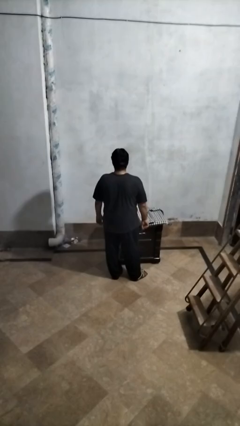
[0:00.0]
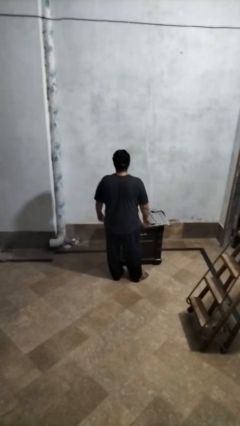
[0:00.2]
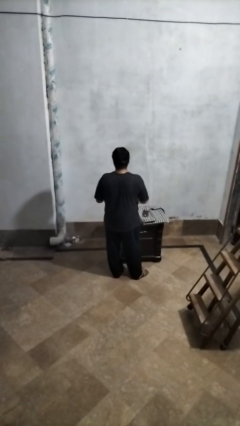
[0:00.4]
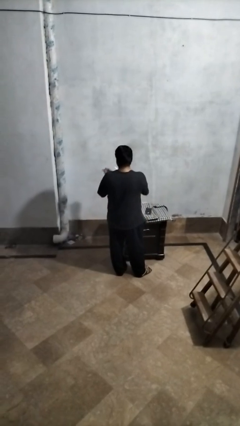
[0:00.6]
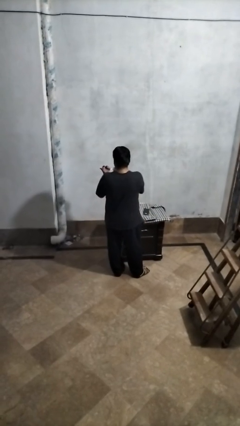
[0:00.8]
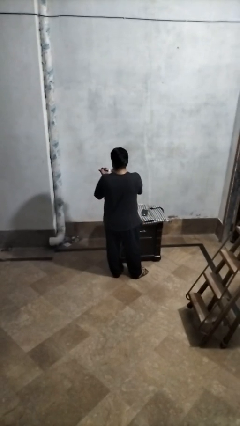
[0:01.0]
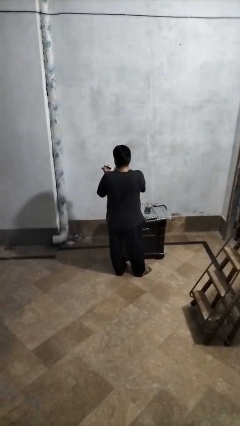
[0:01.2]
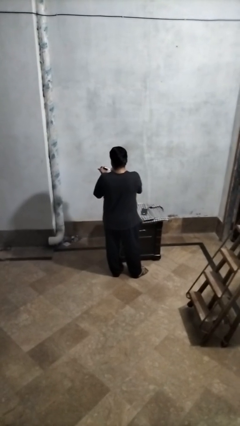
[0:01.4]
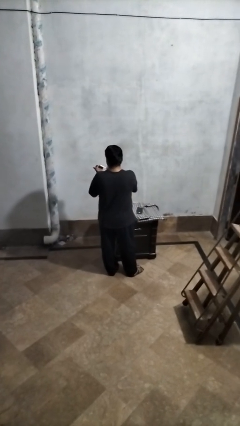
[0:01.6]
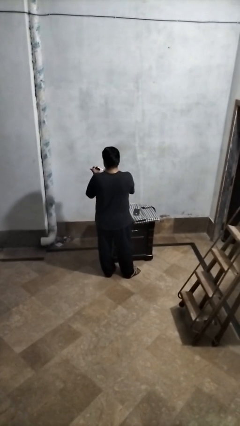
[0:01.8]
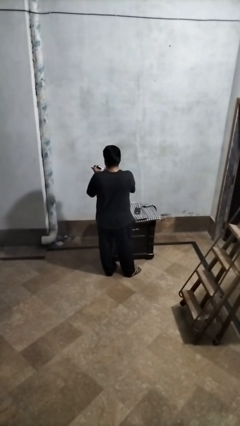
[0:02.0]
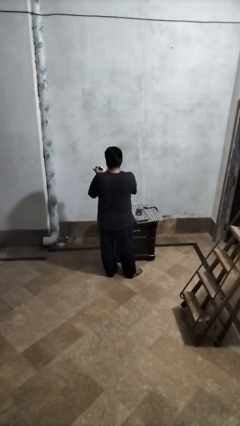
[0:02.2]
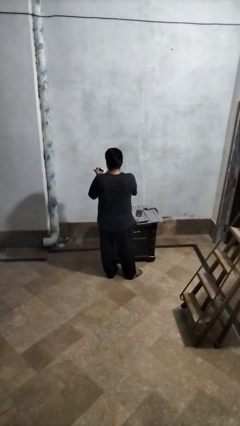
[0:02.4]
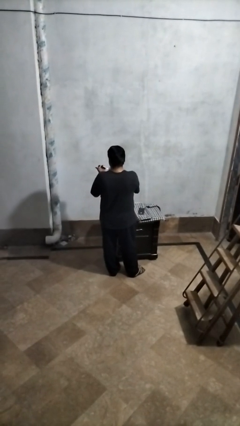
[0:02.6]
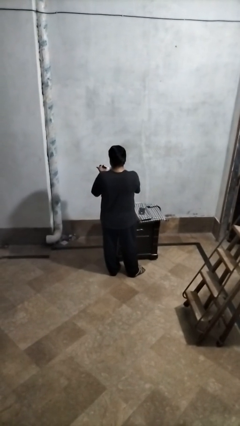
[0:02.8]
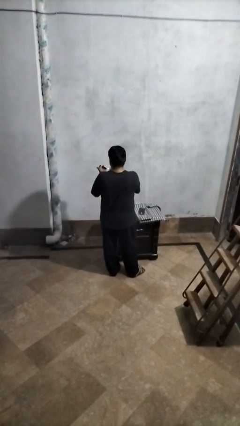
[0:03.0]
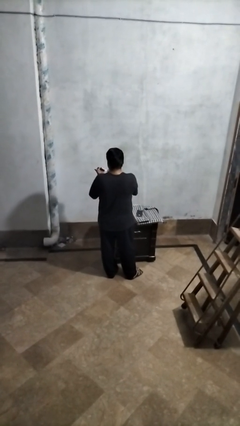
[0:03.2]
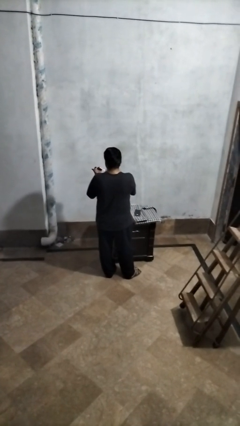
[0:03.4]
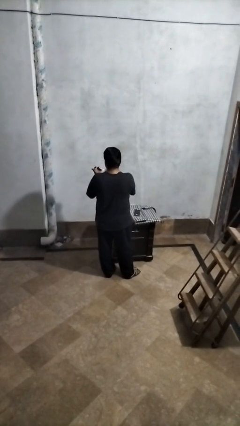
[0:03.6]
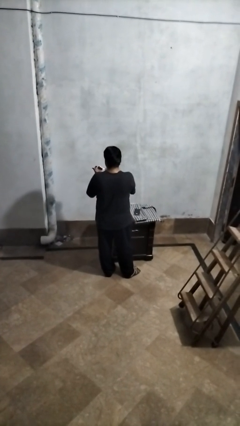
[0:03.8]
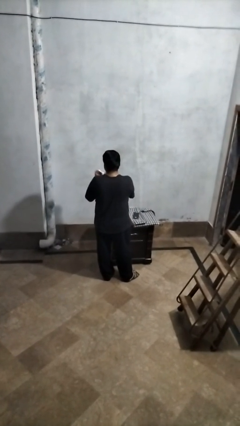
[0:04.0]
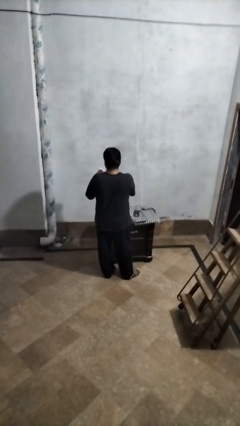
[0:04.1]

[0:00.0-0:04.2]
person files fingernails

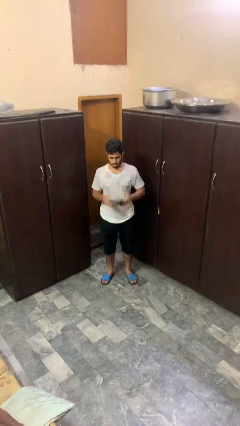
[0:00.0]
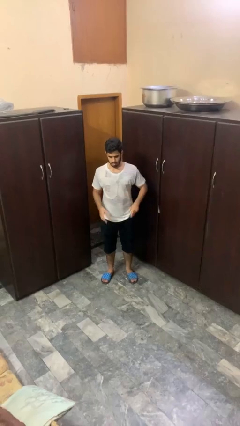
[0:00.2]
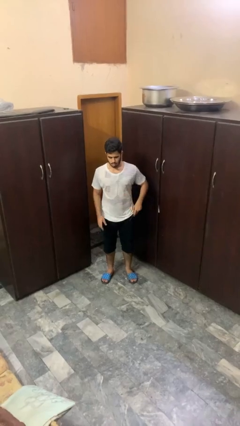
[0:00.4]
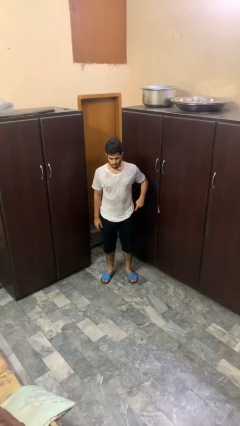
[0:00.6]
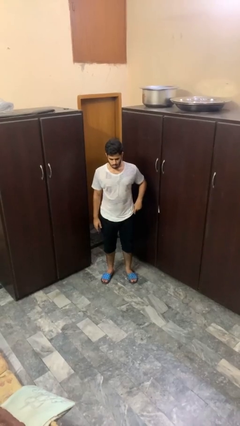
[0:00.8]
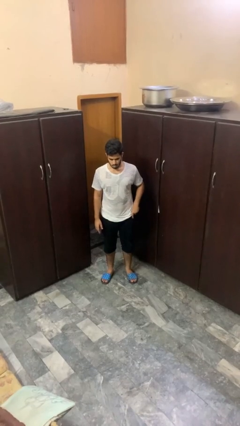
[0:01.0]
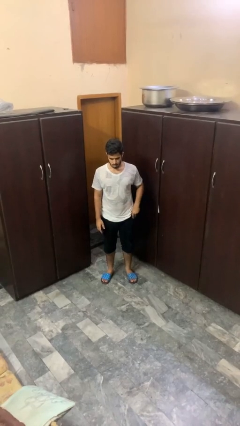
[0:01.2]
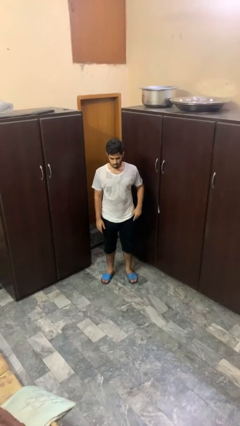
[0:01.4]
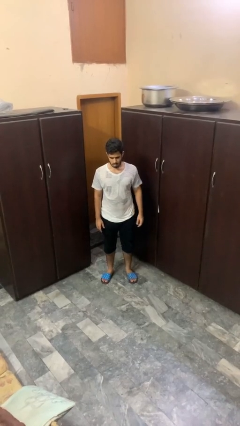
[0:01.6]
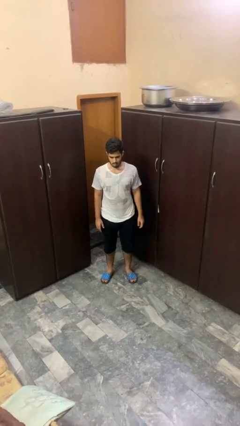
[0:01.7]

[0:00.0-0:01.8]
person puts phone into pocket

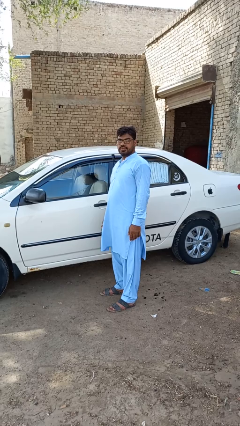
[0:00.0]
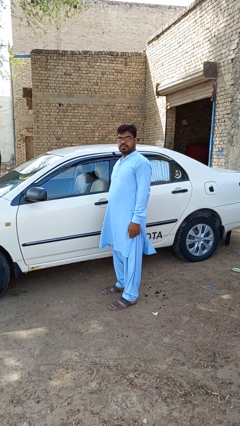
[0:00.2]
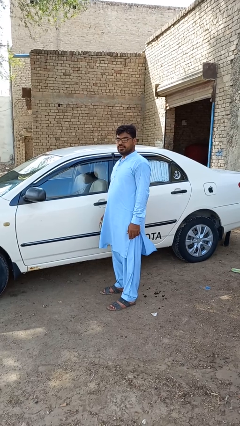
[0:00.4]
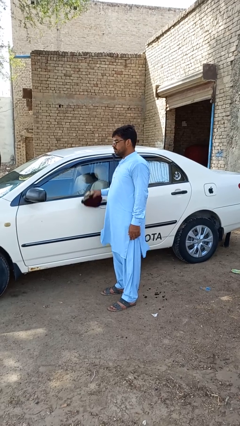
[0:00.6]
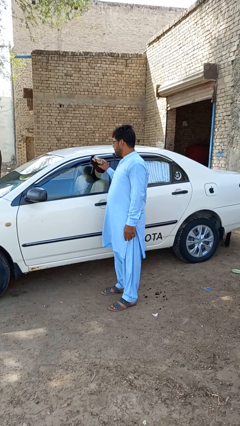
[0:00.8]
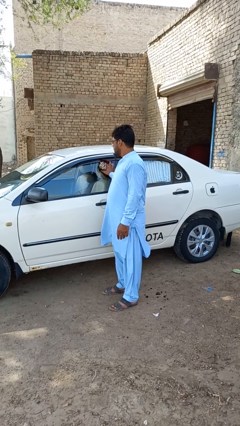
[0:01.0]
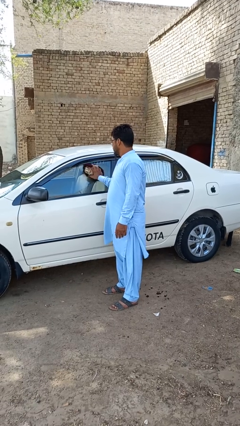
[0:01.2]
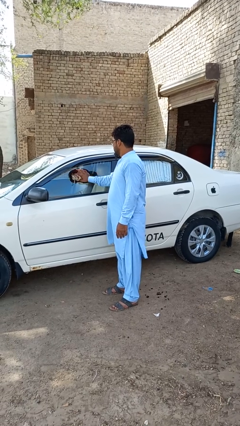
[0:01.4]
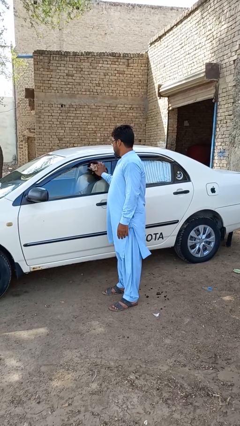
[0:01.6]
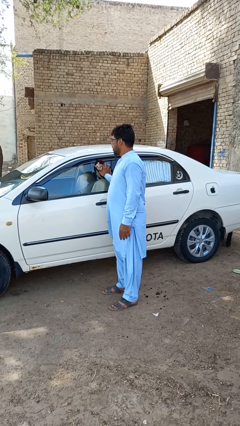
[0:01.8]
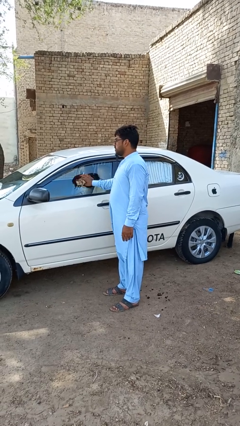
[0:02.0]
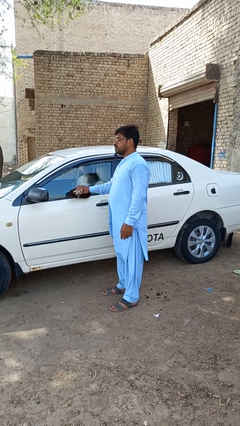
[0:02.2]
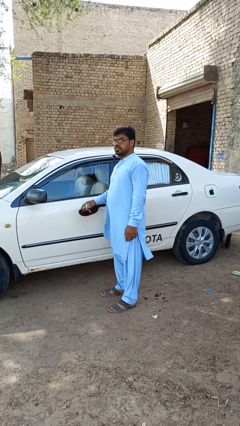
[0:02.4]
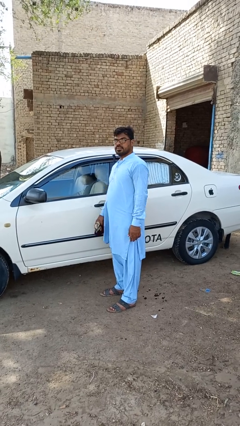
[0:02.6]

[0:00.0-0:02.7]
person polishes car with rag

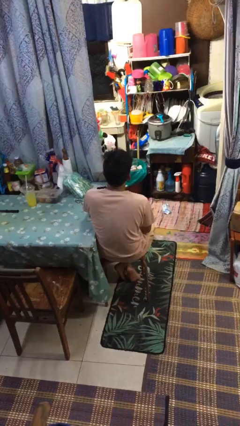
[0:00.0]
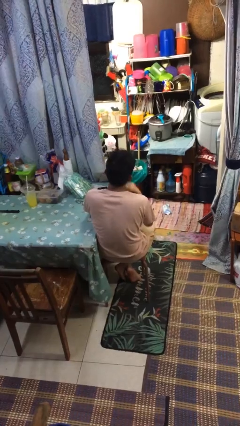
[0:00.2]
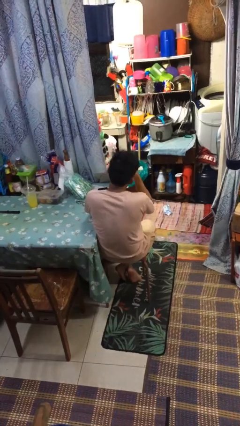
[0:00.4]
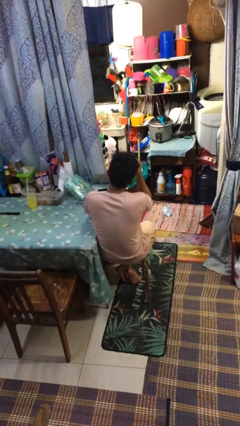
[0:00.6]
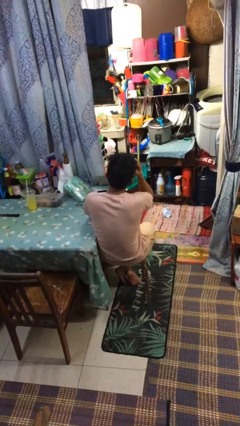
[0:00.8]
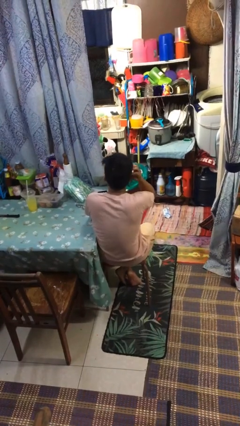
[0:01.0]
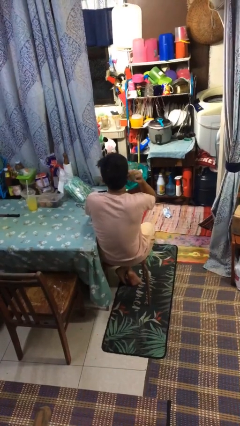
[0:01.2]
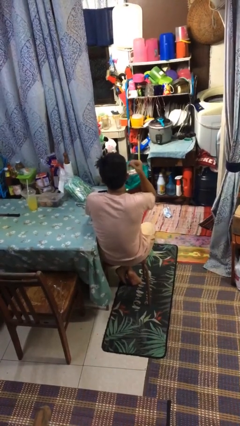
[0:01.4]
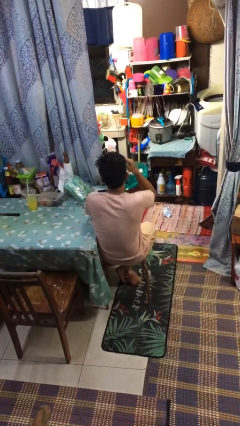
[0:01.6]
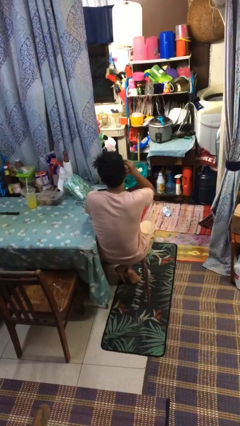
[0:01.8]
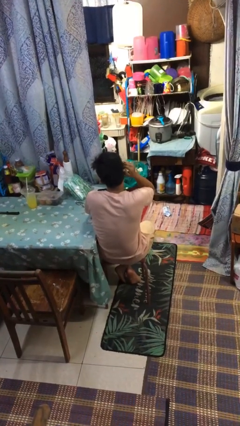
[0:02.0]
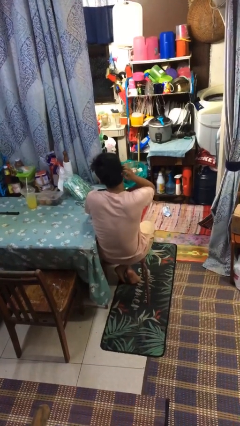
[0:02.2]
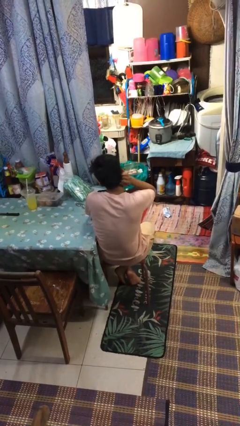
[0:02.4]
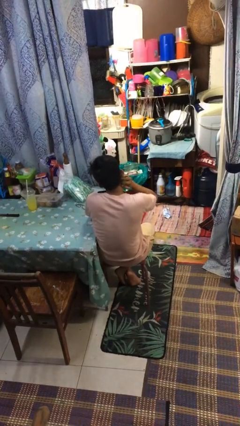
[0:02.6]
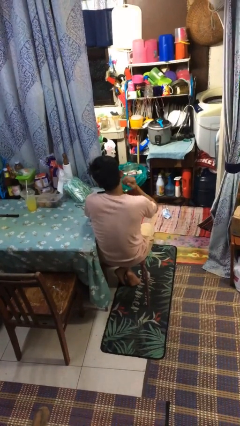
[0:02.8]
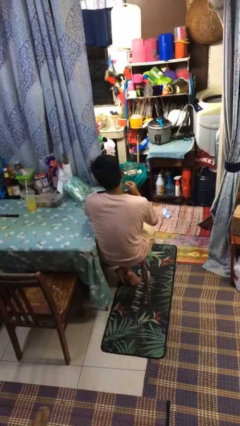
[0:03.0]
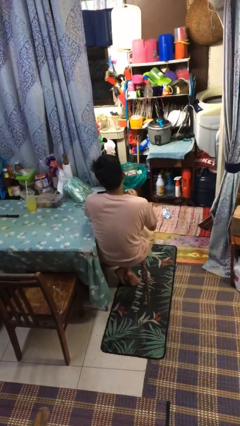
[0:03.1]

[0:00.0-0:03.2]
person strokes hair

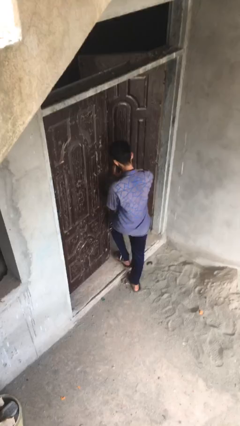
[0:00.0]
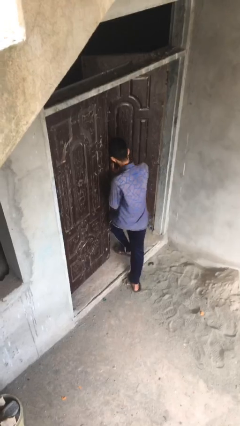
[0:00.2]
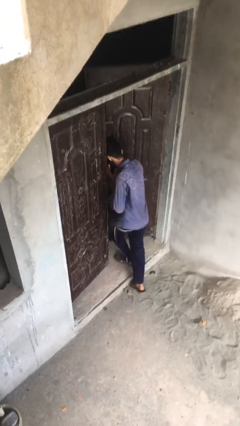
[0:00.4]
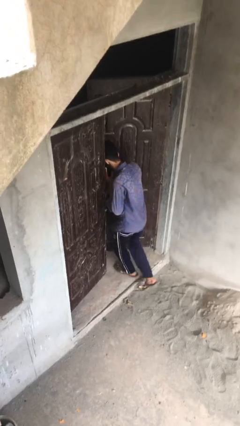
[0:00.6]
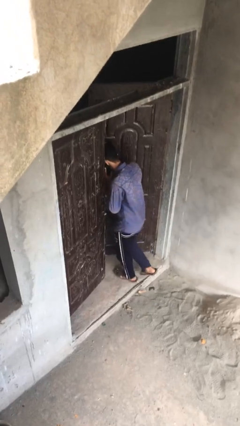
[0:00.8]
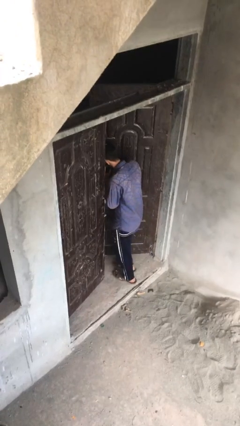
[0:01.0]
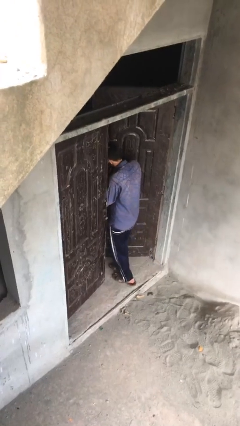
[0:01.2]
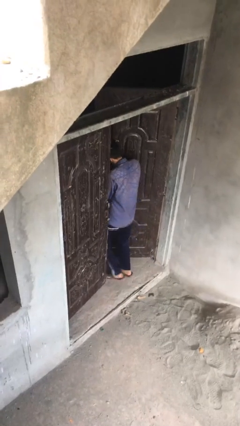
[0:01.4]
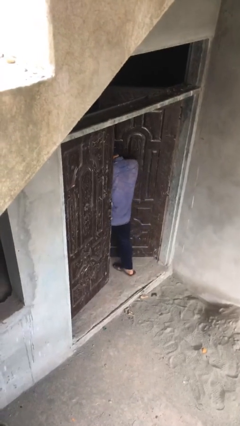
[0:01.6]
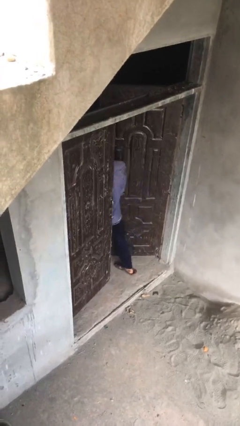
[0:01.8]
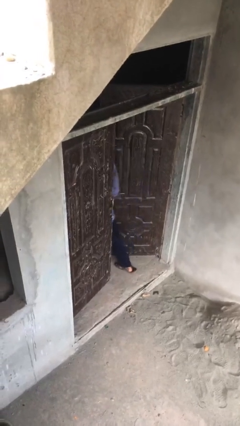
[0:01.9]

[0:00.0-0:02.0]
person exits scene through structure

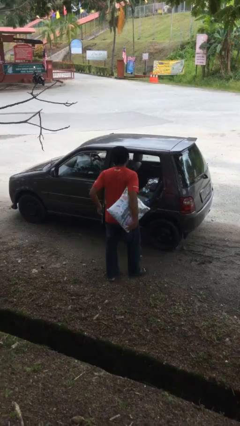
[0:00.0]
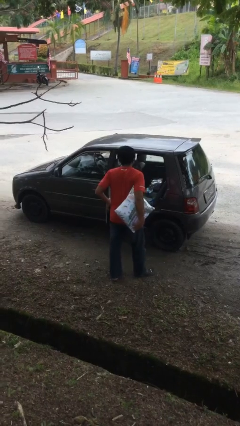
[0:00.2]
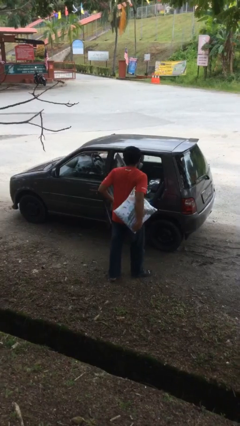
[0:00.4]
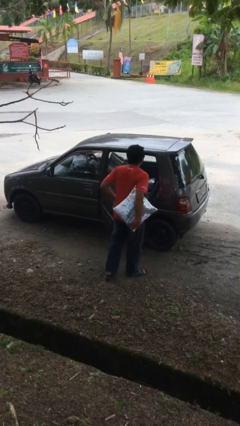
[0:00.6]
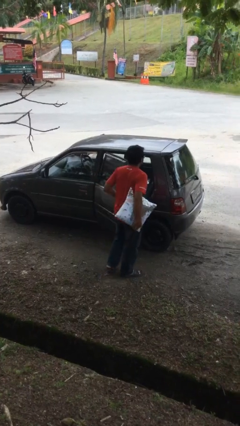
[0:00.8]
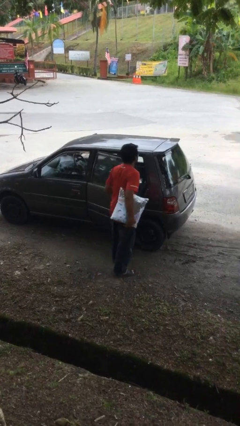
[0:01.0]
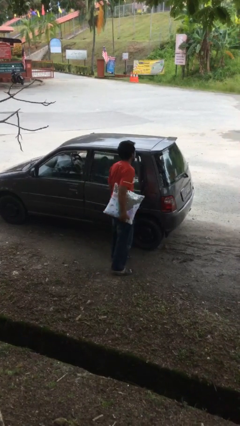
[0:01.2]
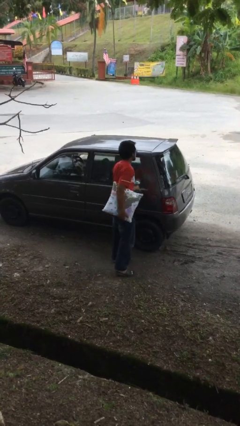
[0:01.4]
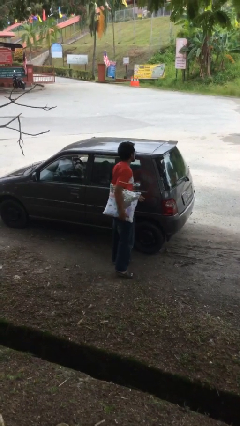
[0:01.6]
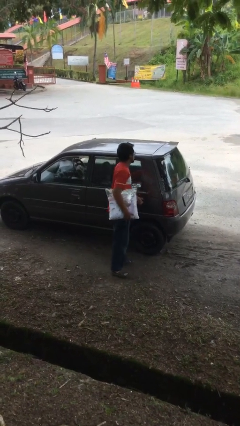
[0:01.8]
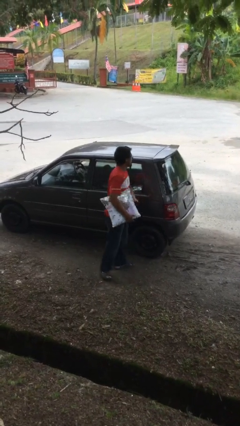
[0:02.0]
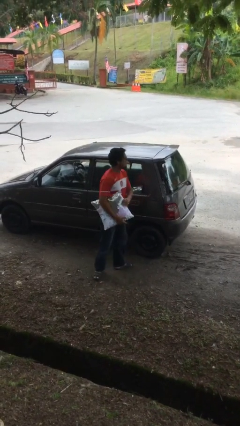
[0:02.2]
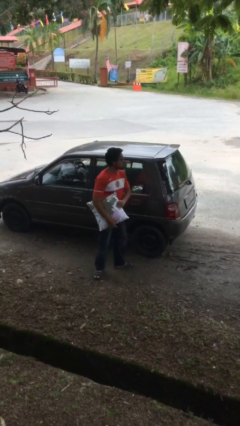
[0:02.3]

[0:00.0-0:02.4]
person closes car door

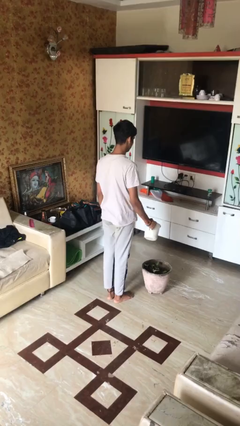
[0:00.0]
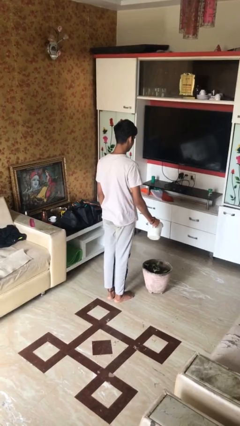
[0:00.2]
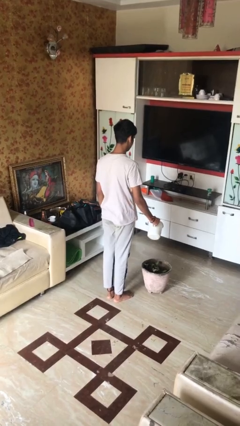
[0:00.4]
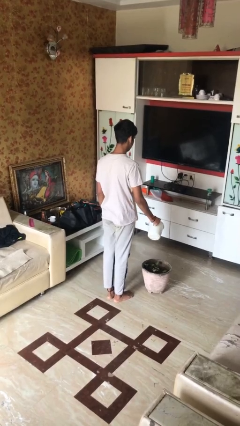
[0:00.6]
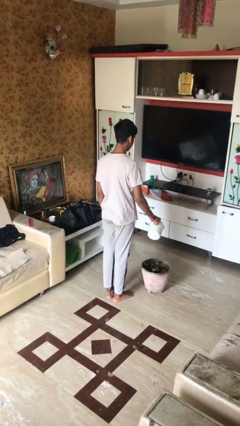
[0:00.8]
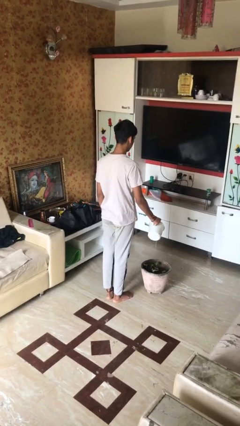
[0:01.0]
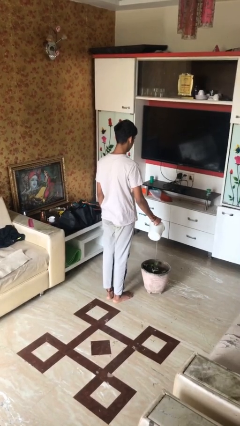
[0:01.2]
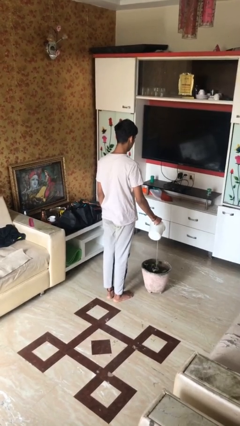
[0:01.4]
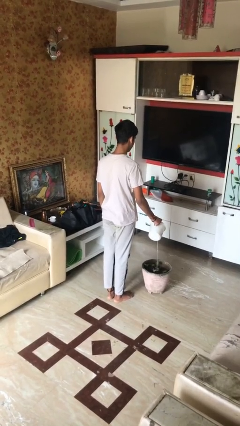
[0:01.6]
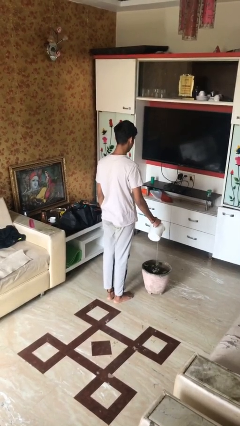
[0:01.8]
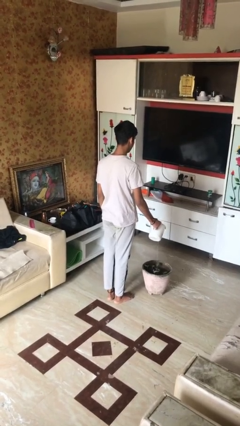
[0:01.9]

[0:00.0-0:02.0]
person waters houseplant
